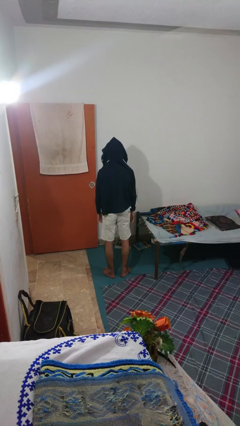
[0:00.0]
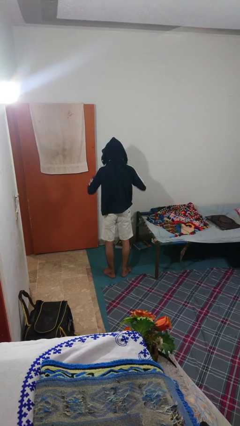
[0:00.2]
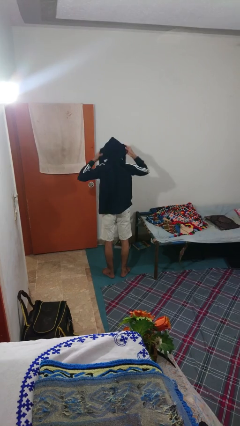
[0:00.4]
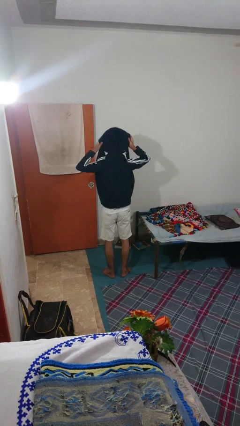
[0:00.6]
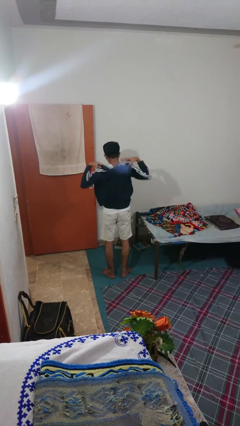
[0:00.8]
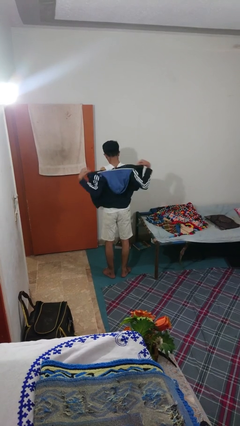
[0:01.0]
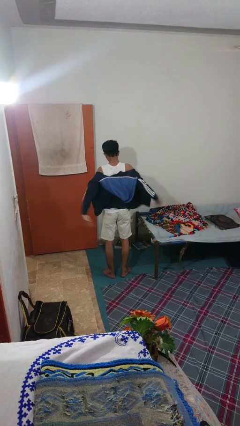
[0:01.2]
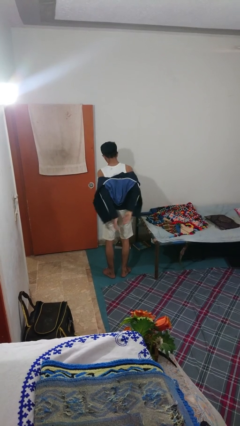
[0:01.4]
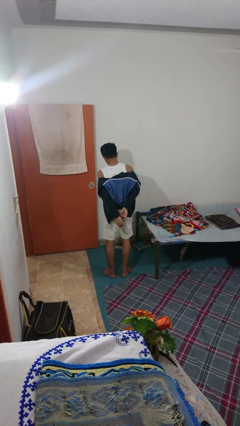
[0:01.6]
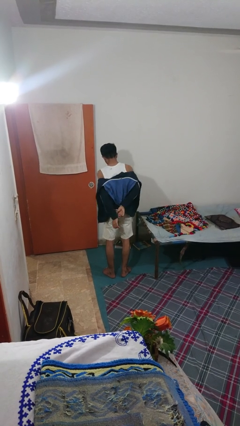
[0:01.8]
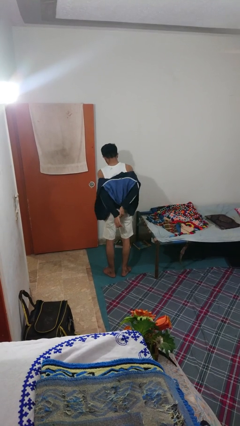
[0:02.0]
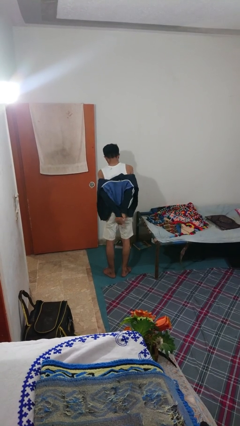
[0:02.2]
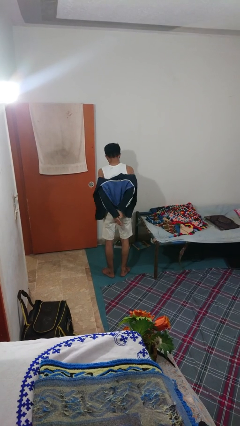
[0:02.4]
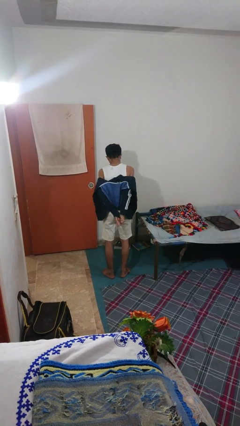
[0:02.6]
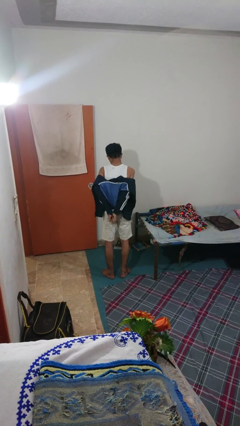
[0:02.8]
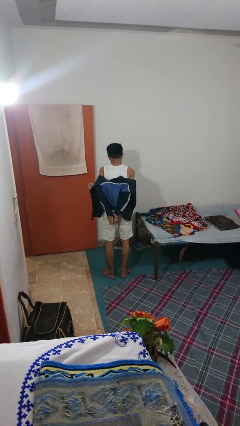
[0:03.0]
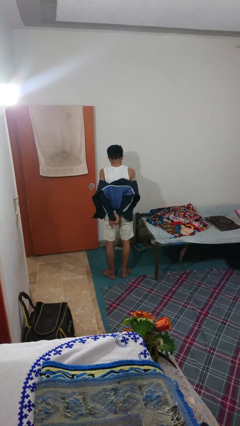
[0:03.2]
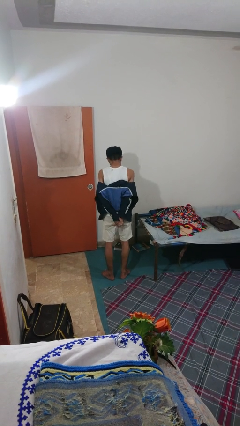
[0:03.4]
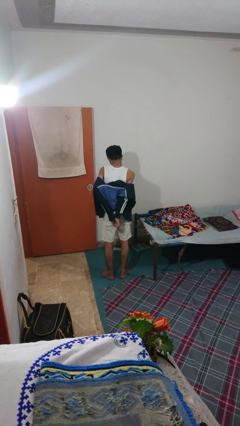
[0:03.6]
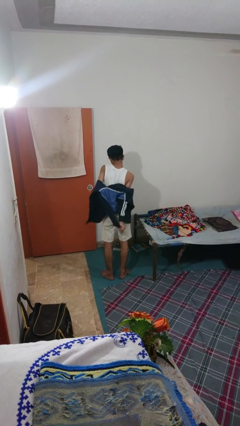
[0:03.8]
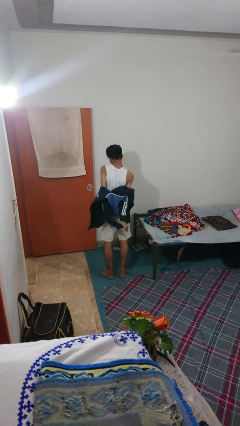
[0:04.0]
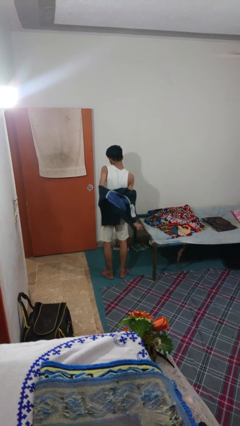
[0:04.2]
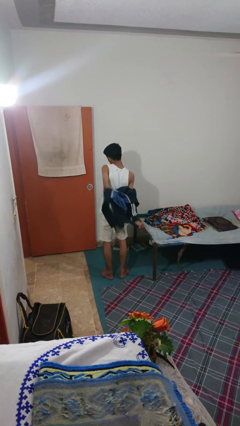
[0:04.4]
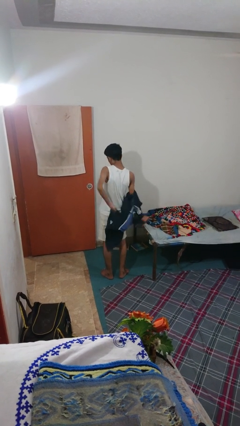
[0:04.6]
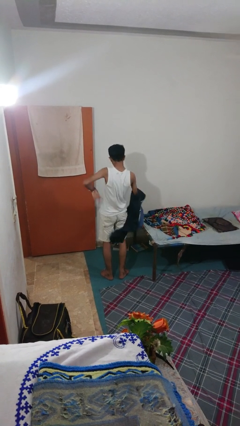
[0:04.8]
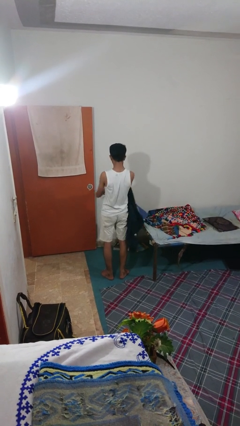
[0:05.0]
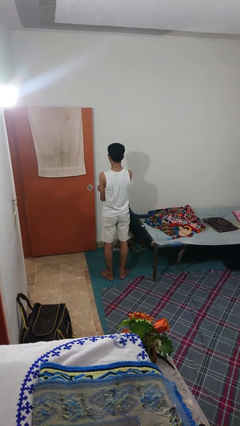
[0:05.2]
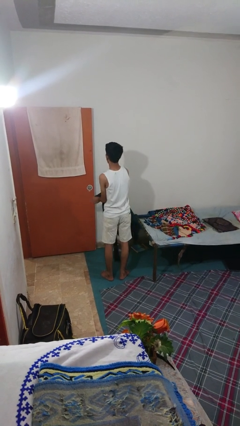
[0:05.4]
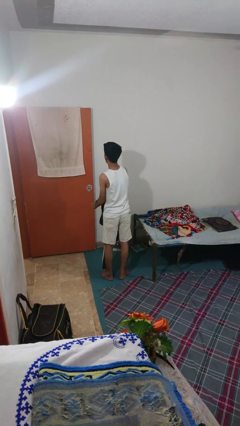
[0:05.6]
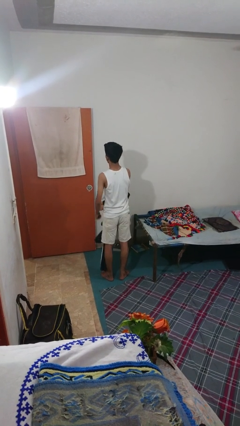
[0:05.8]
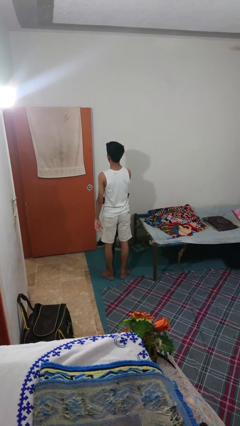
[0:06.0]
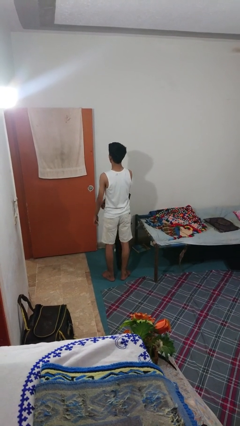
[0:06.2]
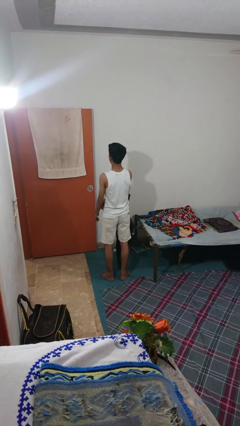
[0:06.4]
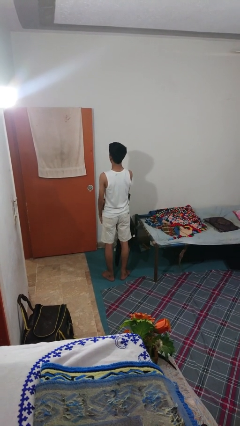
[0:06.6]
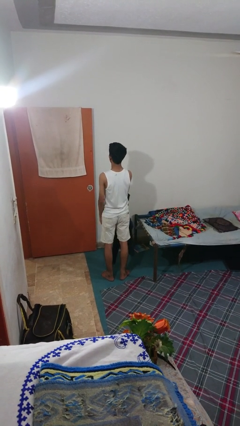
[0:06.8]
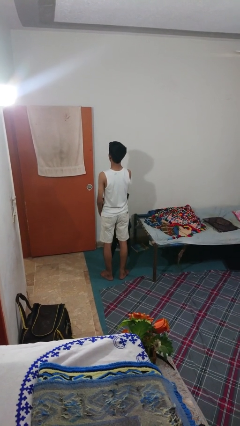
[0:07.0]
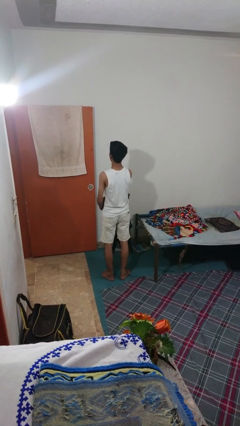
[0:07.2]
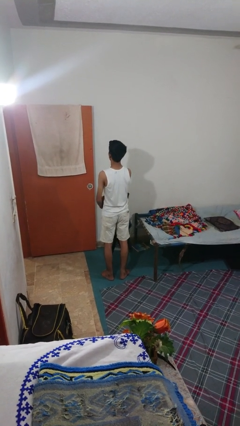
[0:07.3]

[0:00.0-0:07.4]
person takes off hoodie

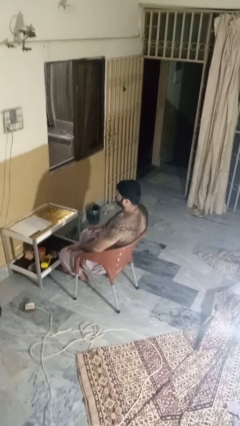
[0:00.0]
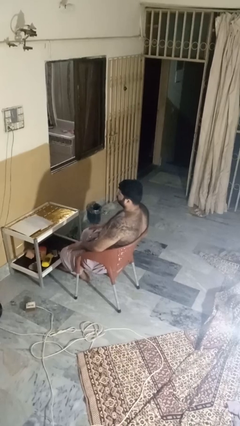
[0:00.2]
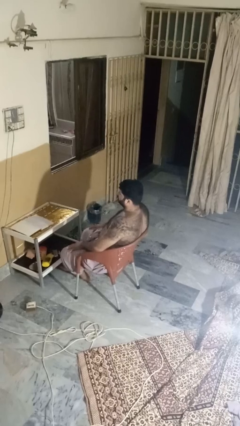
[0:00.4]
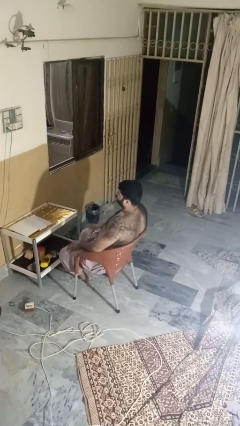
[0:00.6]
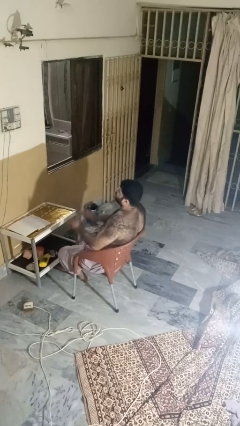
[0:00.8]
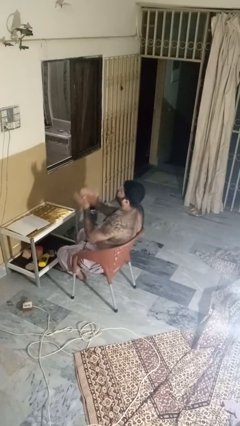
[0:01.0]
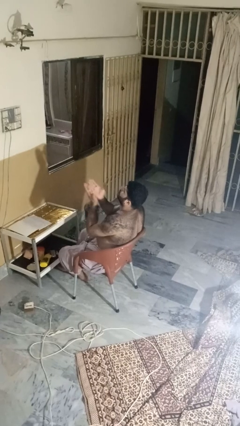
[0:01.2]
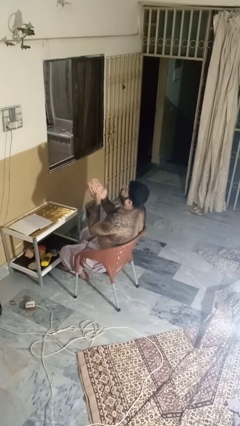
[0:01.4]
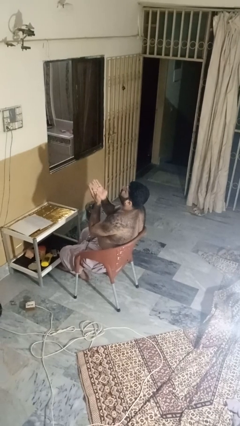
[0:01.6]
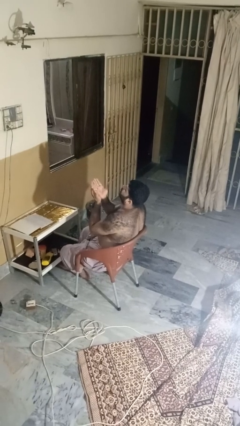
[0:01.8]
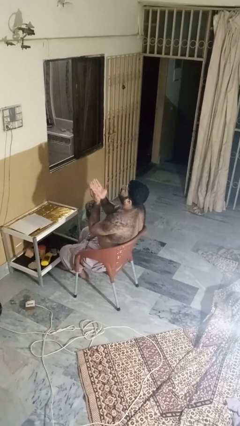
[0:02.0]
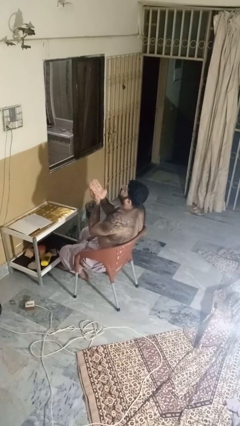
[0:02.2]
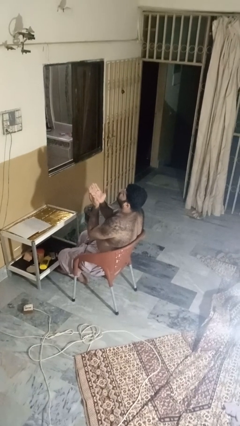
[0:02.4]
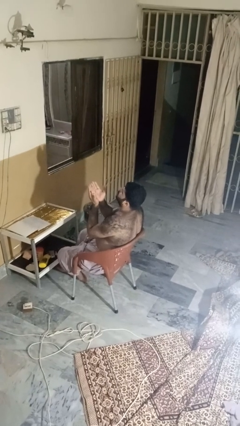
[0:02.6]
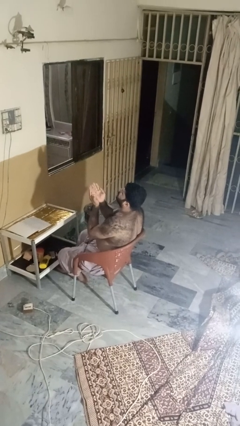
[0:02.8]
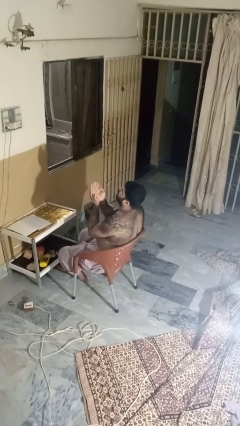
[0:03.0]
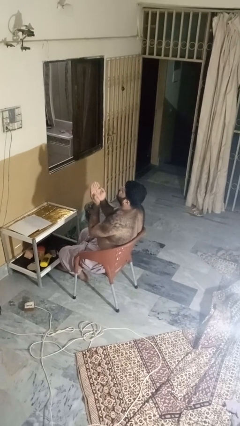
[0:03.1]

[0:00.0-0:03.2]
person prays

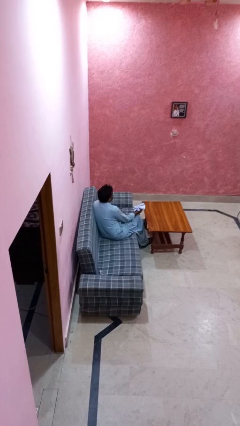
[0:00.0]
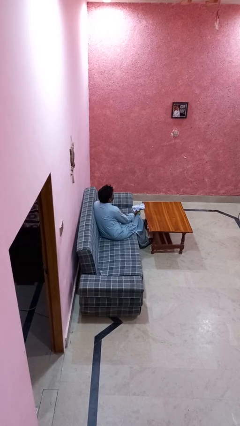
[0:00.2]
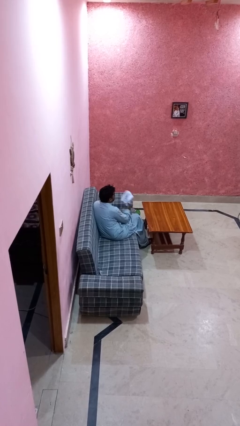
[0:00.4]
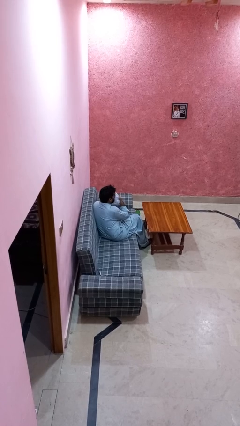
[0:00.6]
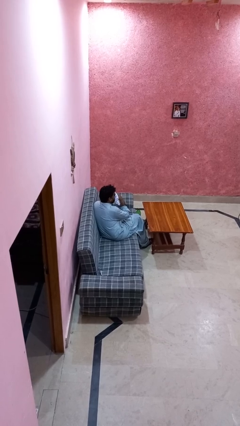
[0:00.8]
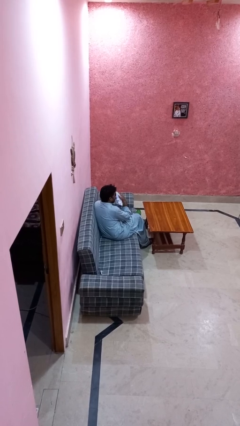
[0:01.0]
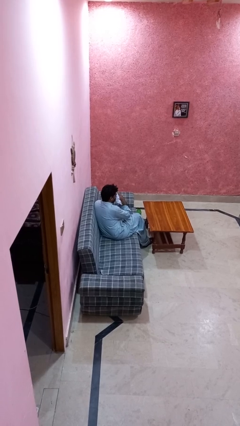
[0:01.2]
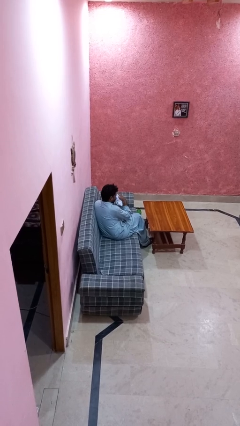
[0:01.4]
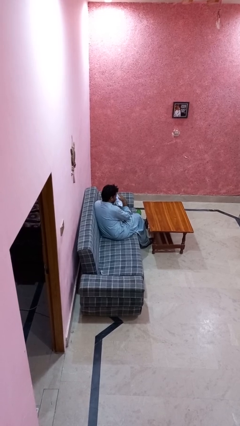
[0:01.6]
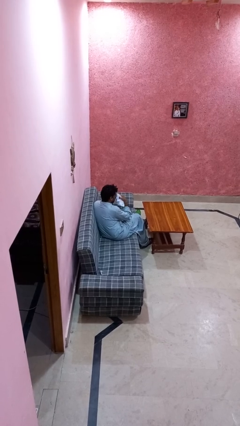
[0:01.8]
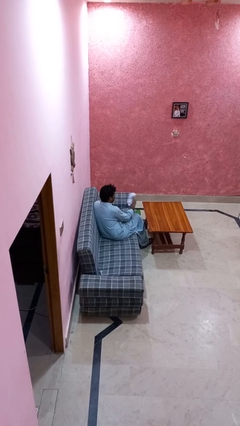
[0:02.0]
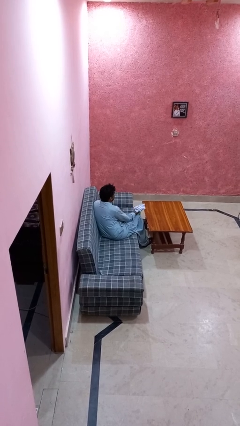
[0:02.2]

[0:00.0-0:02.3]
person blows nose

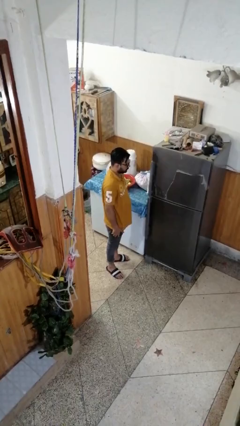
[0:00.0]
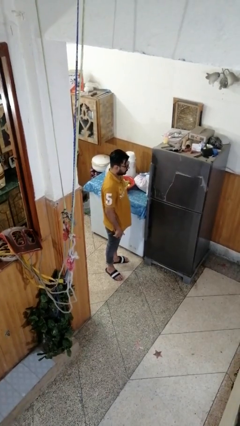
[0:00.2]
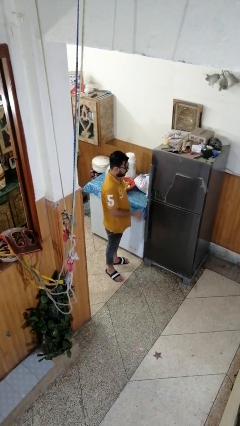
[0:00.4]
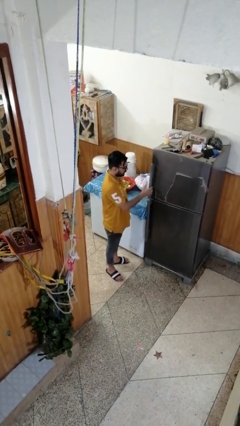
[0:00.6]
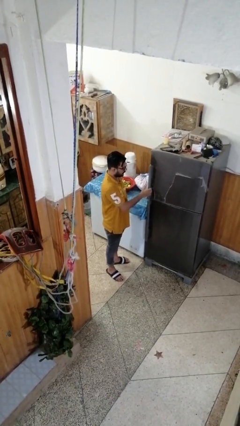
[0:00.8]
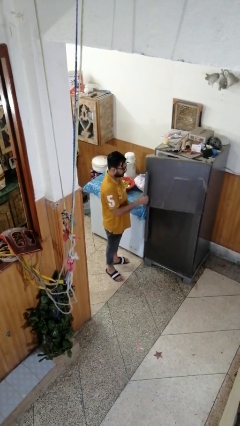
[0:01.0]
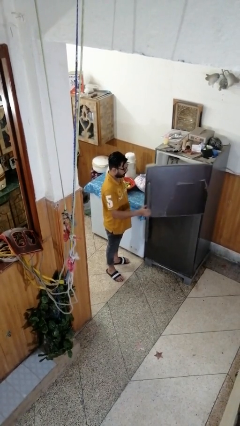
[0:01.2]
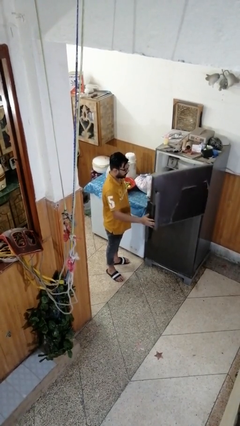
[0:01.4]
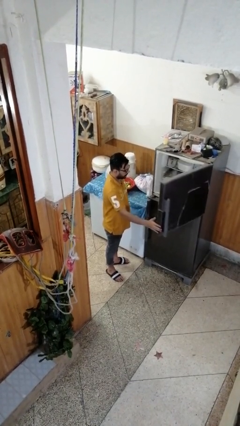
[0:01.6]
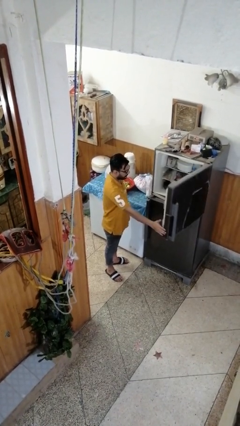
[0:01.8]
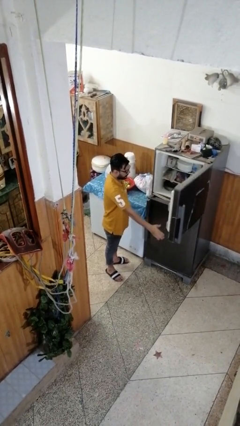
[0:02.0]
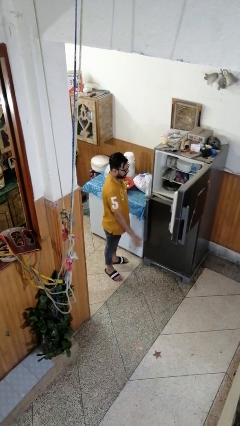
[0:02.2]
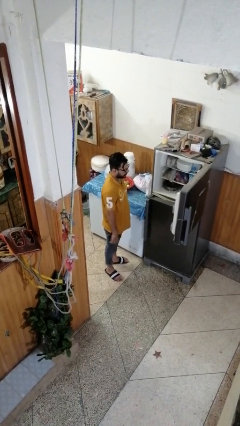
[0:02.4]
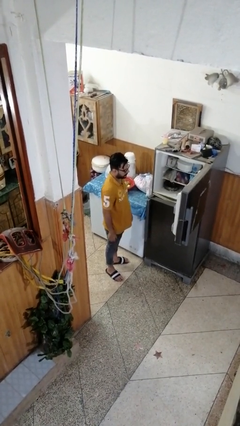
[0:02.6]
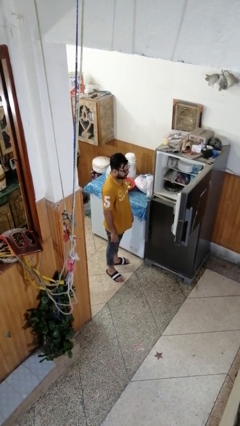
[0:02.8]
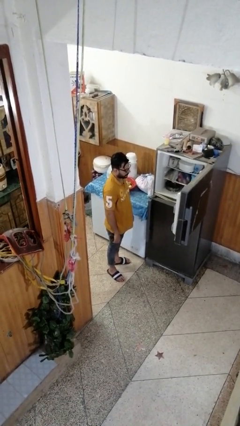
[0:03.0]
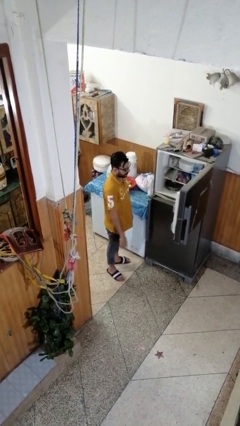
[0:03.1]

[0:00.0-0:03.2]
person opens refrigerator

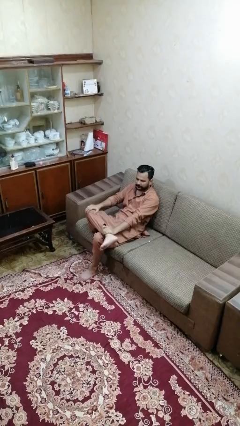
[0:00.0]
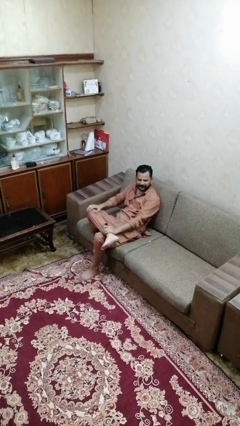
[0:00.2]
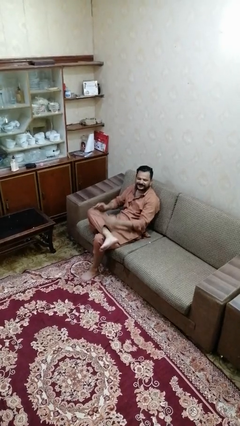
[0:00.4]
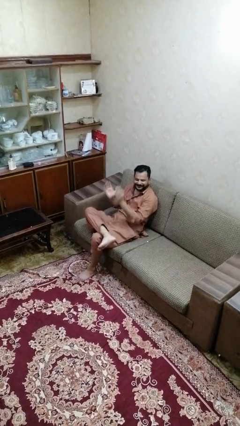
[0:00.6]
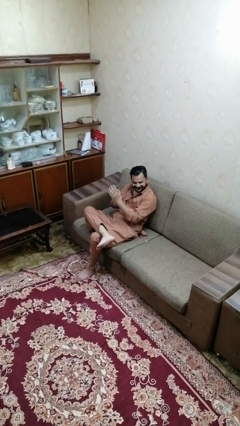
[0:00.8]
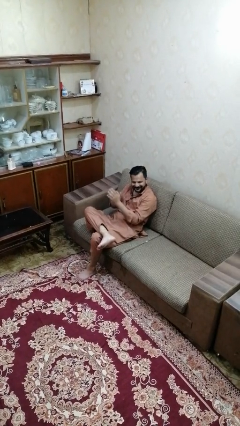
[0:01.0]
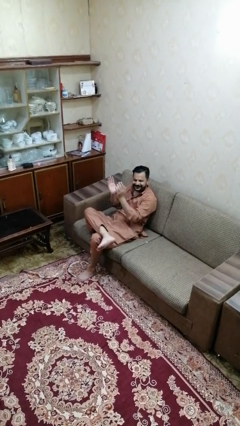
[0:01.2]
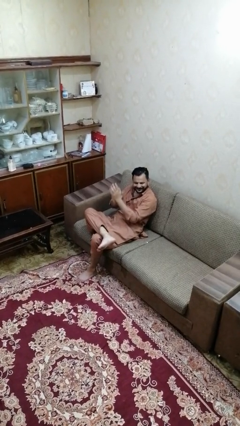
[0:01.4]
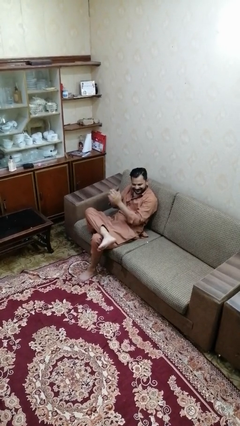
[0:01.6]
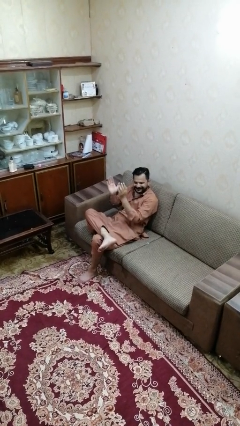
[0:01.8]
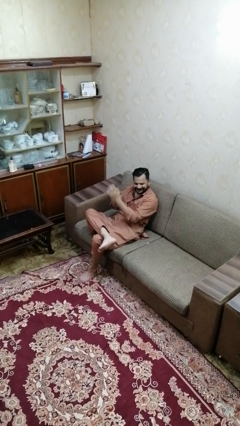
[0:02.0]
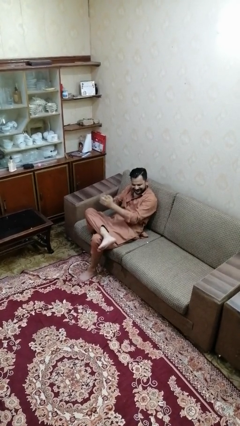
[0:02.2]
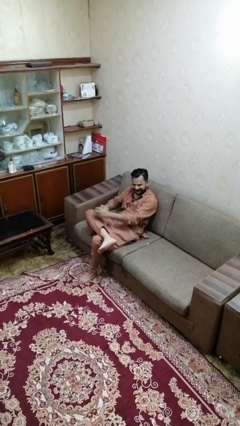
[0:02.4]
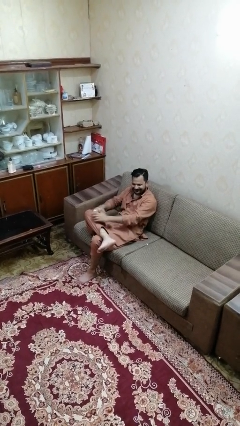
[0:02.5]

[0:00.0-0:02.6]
person claps hands
